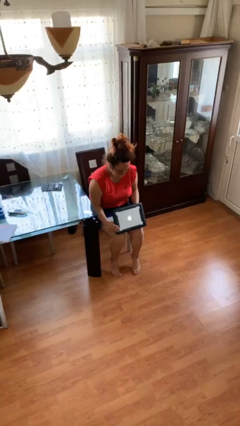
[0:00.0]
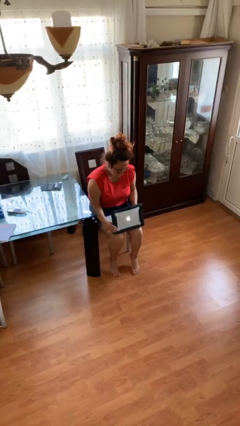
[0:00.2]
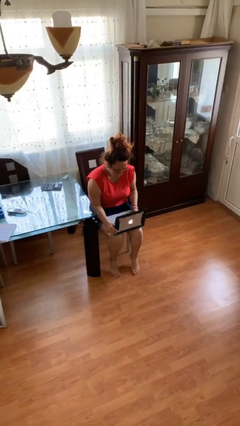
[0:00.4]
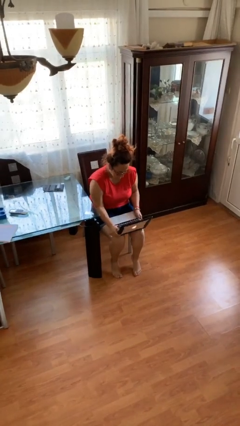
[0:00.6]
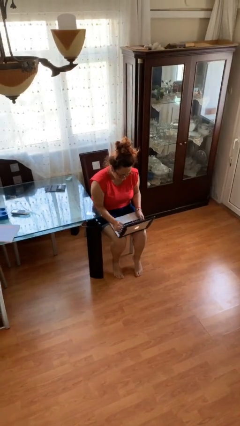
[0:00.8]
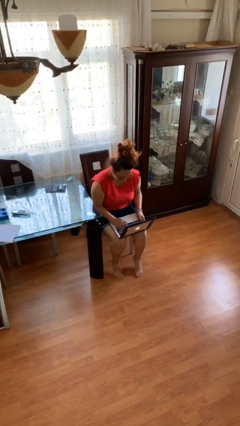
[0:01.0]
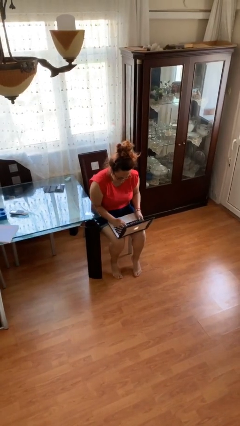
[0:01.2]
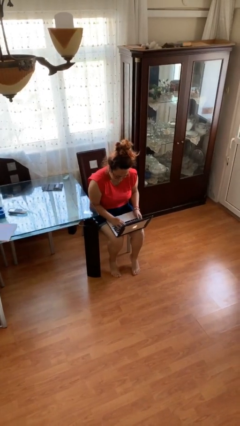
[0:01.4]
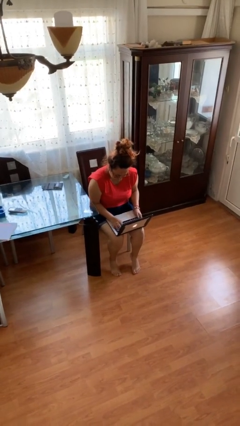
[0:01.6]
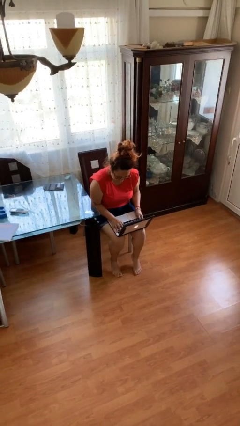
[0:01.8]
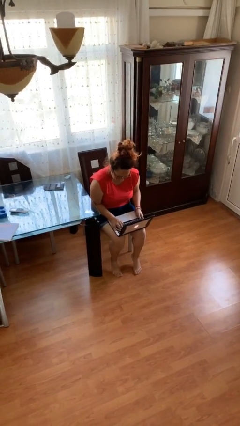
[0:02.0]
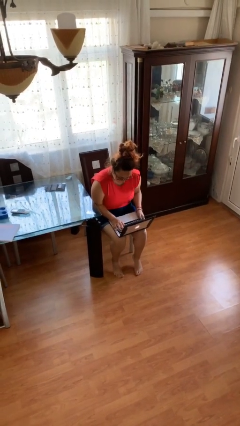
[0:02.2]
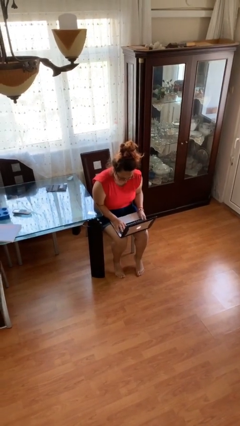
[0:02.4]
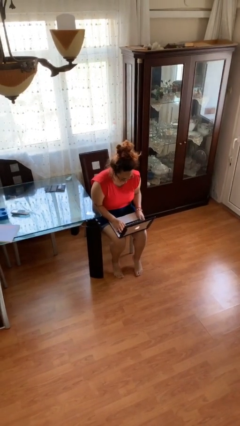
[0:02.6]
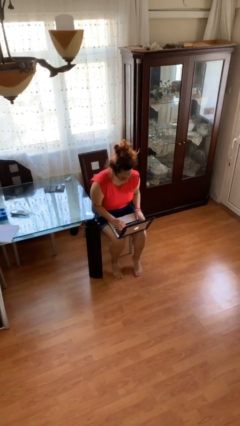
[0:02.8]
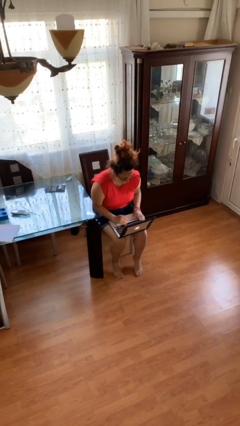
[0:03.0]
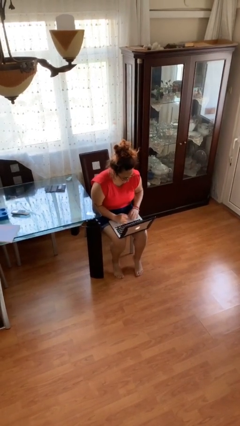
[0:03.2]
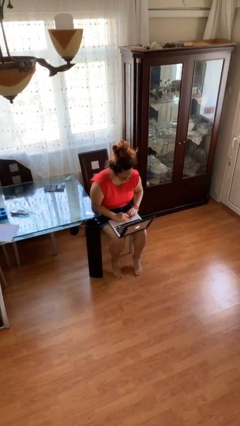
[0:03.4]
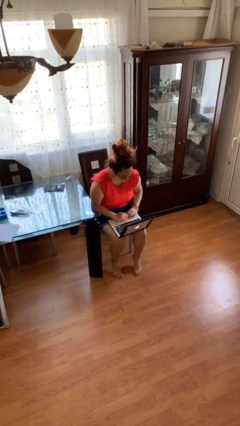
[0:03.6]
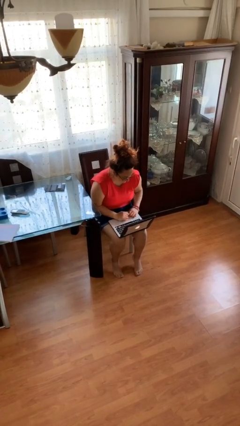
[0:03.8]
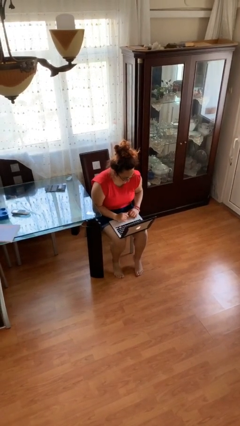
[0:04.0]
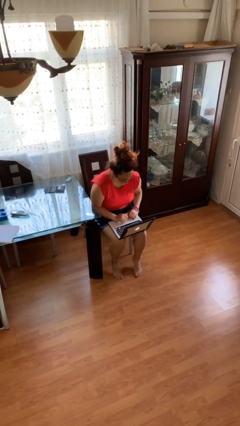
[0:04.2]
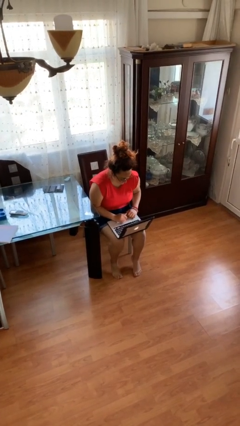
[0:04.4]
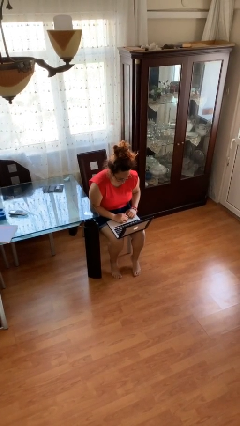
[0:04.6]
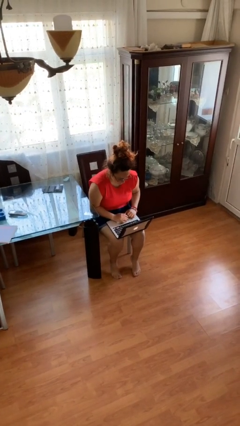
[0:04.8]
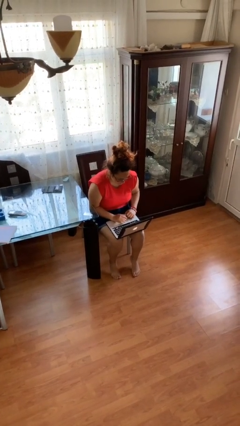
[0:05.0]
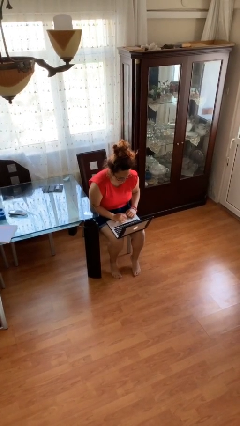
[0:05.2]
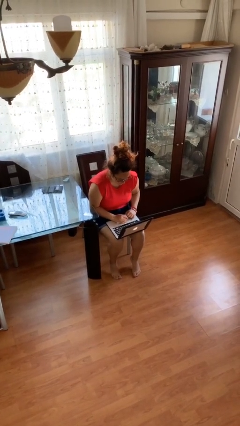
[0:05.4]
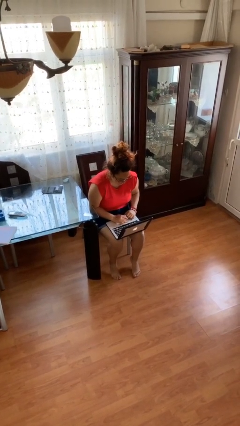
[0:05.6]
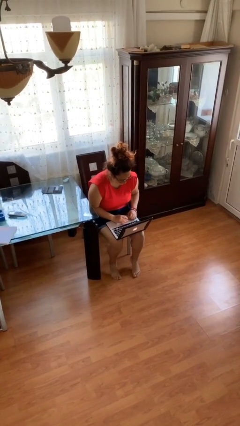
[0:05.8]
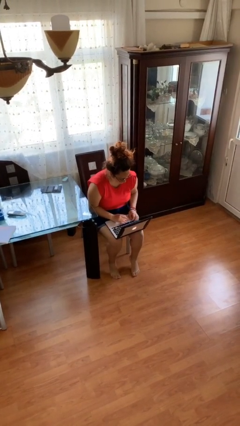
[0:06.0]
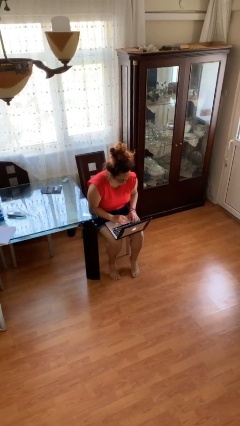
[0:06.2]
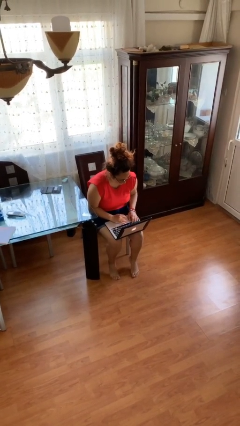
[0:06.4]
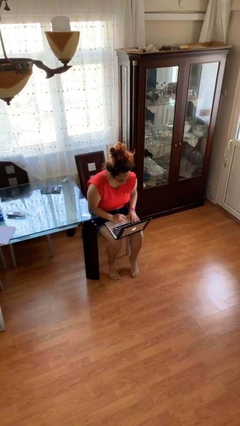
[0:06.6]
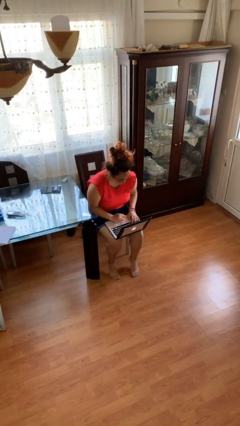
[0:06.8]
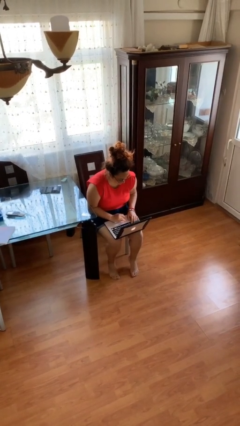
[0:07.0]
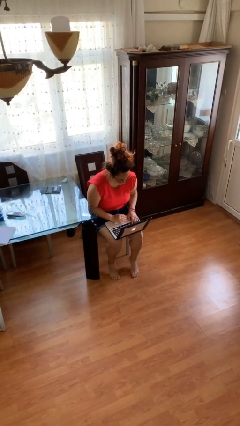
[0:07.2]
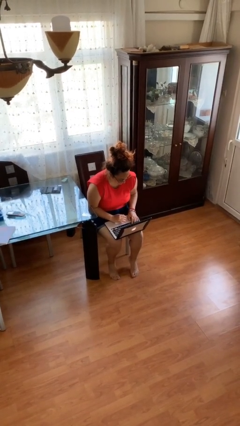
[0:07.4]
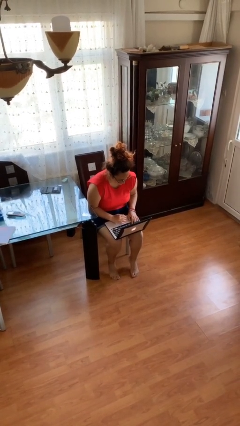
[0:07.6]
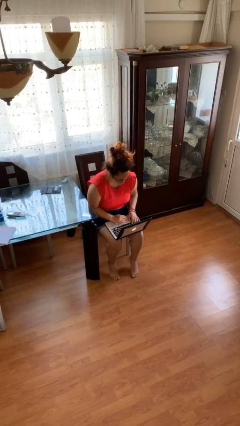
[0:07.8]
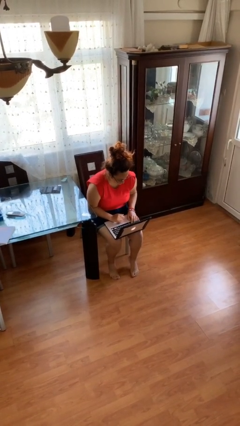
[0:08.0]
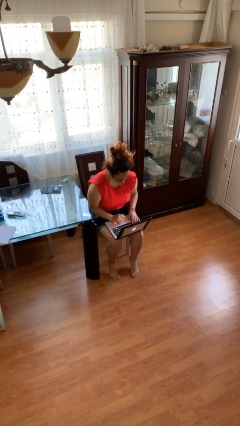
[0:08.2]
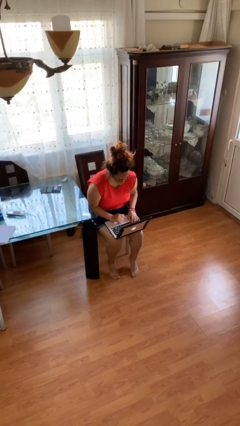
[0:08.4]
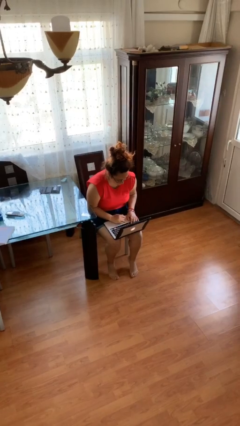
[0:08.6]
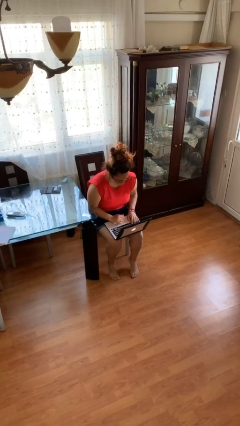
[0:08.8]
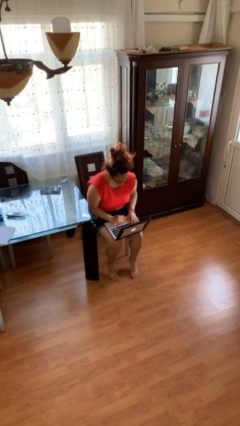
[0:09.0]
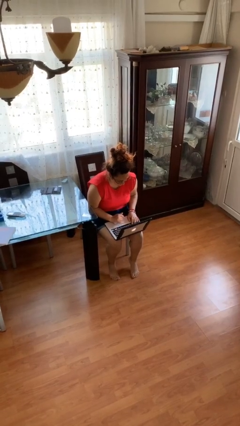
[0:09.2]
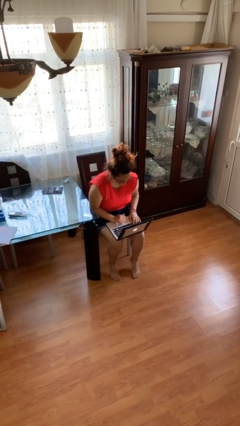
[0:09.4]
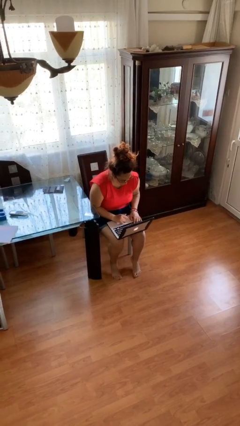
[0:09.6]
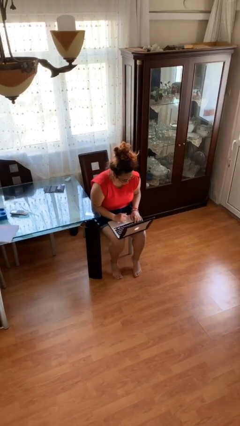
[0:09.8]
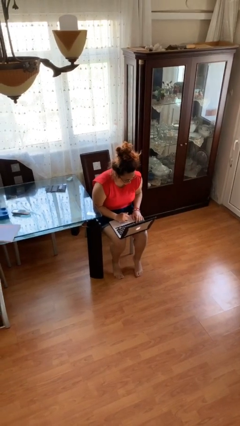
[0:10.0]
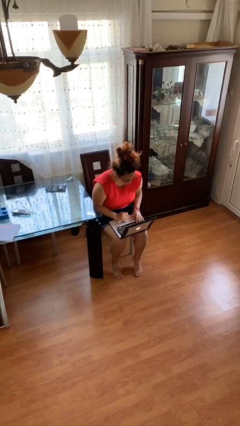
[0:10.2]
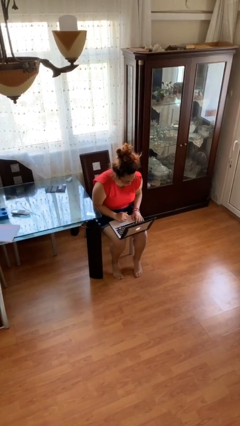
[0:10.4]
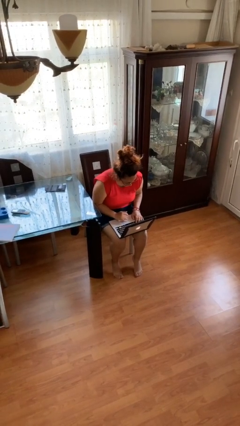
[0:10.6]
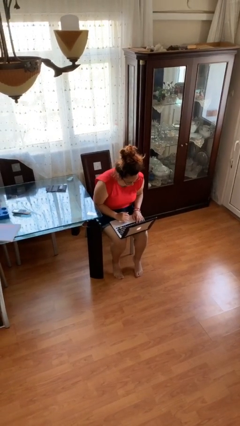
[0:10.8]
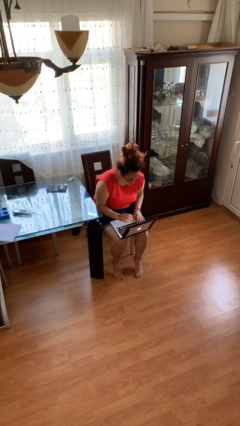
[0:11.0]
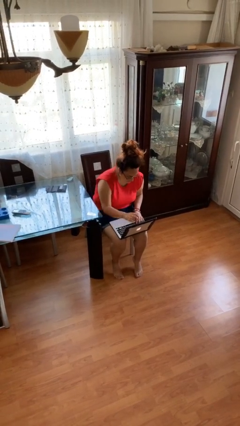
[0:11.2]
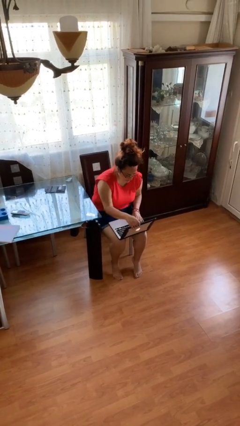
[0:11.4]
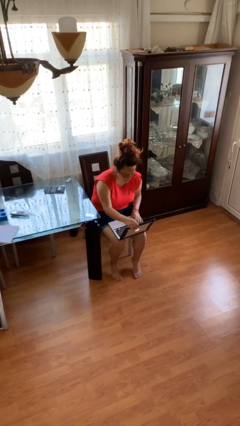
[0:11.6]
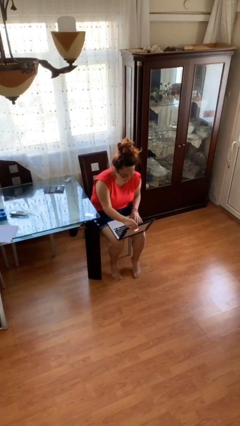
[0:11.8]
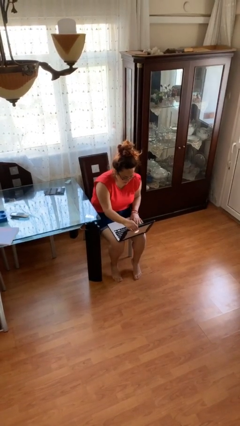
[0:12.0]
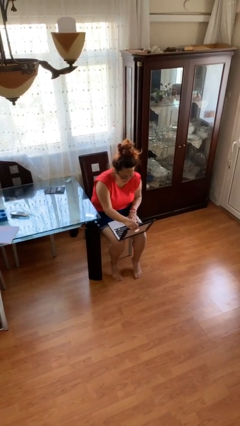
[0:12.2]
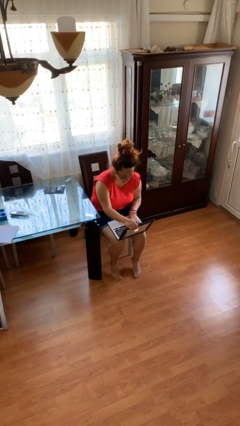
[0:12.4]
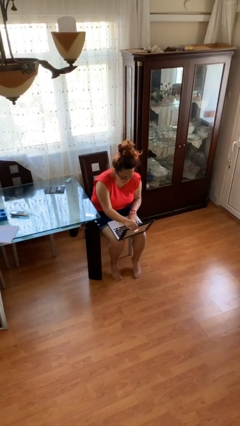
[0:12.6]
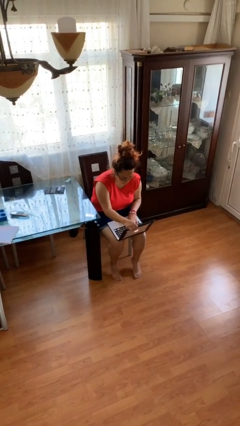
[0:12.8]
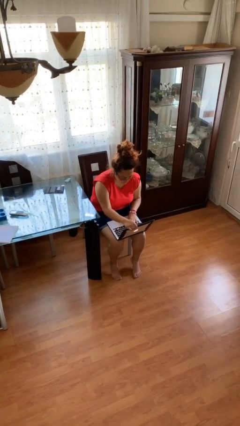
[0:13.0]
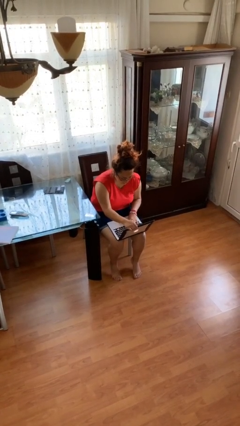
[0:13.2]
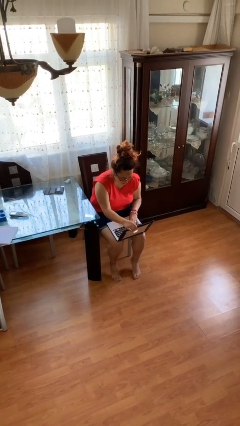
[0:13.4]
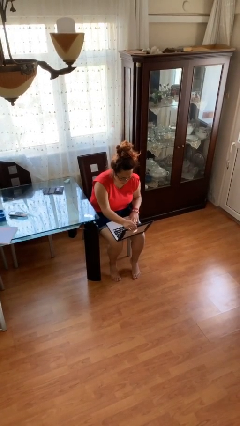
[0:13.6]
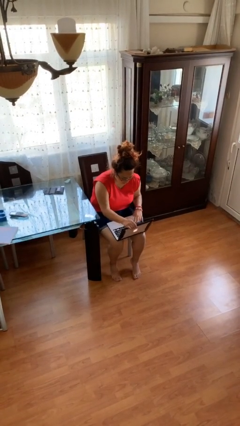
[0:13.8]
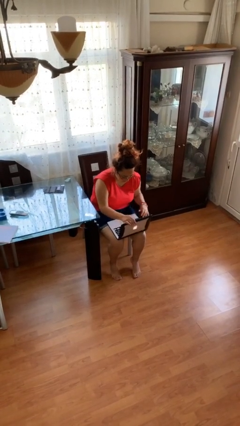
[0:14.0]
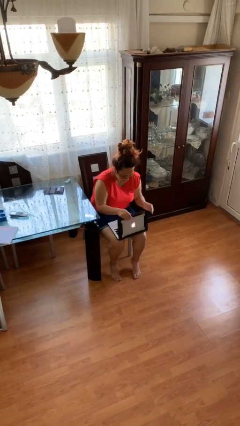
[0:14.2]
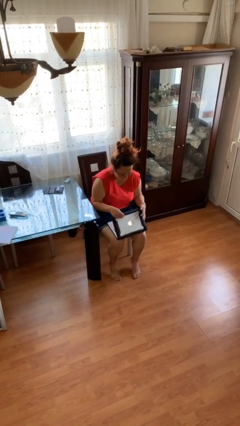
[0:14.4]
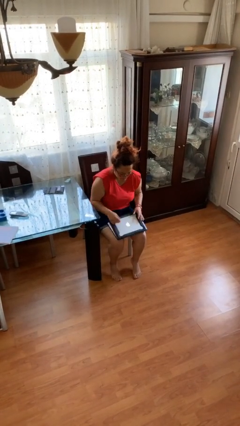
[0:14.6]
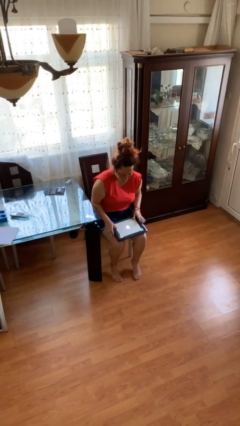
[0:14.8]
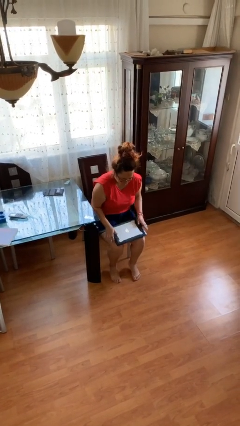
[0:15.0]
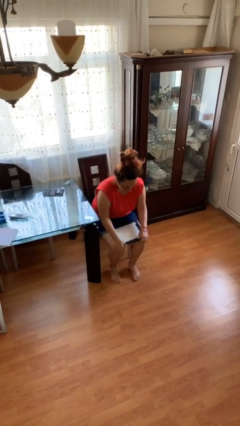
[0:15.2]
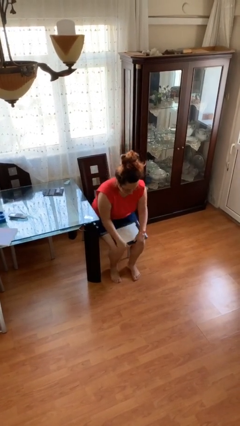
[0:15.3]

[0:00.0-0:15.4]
person interacts with laptop

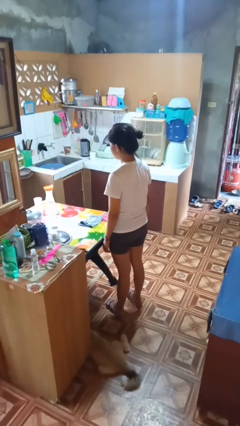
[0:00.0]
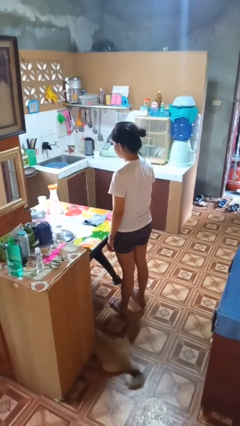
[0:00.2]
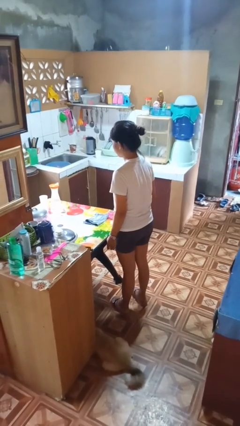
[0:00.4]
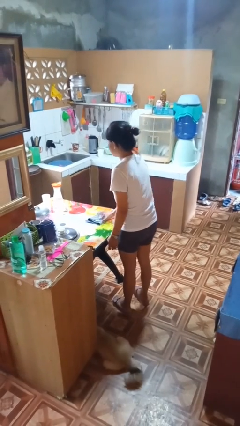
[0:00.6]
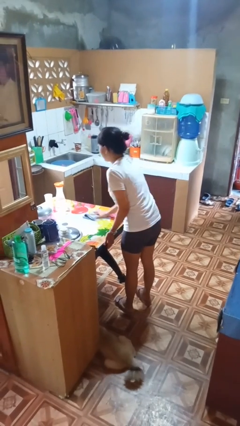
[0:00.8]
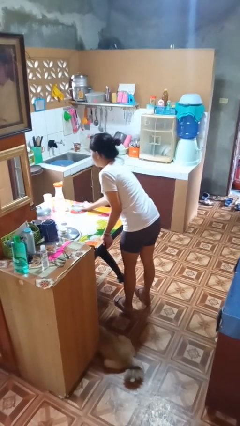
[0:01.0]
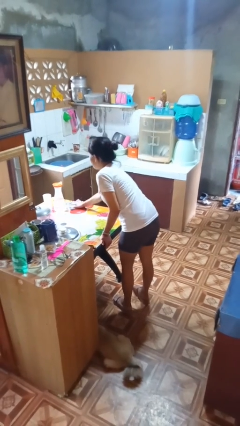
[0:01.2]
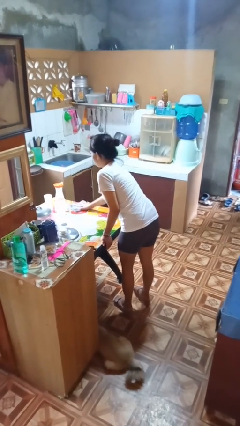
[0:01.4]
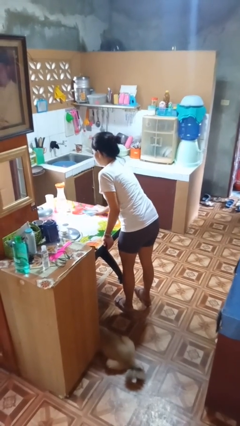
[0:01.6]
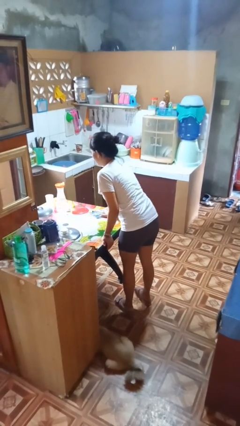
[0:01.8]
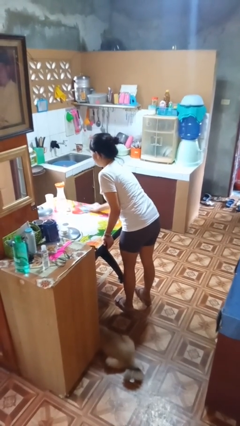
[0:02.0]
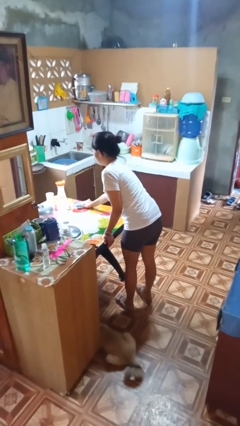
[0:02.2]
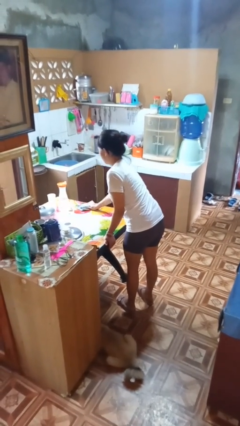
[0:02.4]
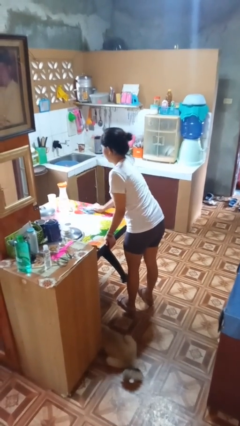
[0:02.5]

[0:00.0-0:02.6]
person cleans table with rag
